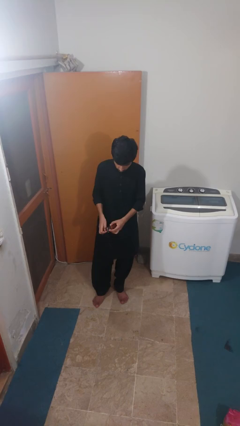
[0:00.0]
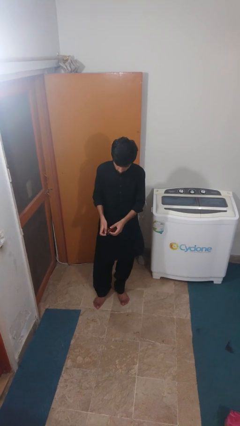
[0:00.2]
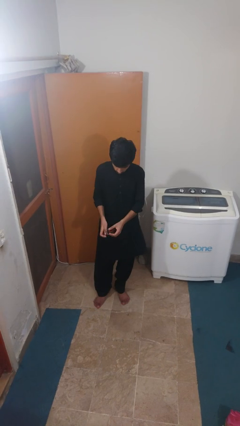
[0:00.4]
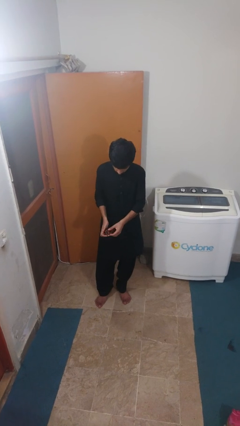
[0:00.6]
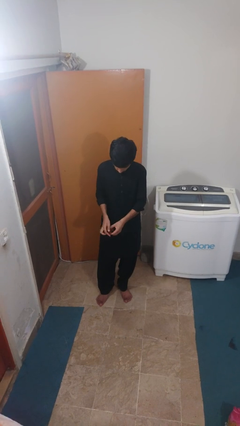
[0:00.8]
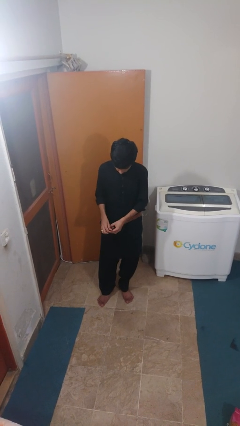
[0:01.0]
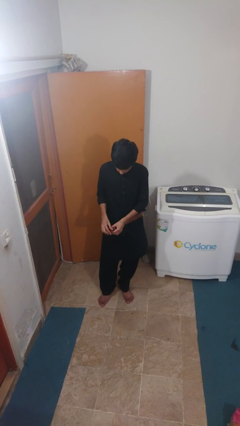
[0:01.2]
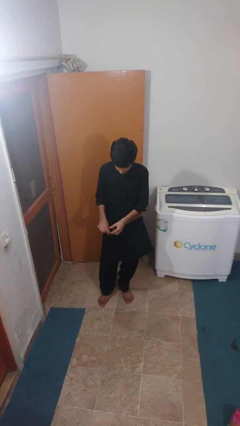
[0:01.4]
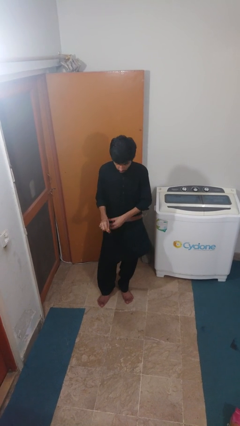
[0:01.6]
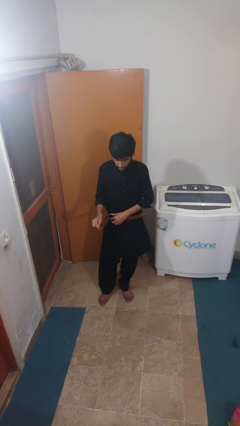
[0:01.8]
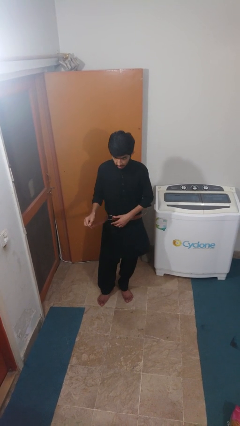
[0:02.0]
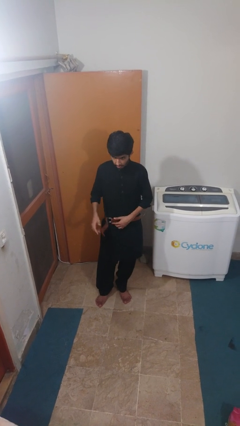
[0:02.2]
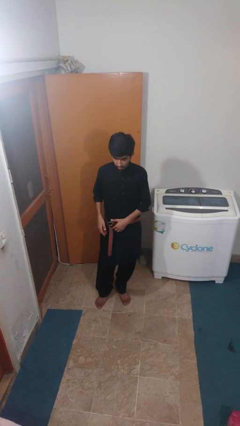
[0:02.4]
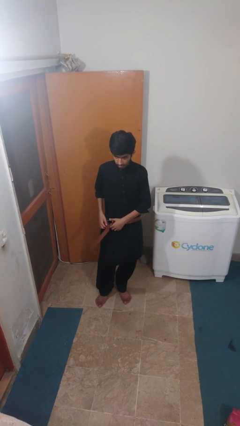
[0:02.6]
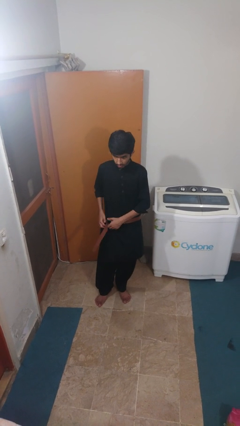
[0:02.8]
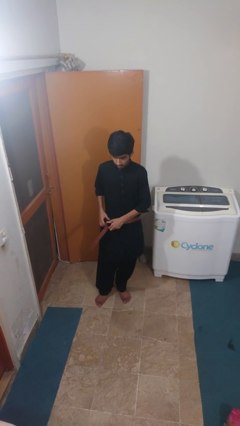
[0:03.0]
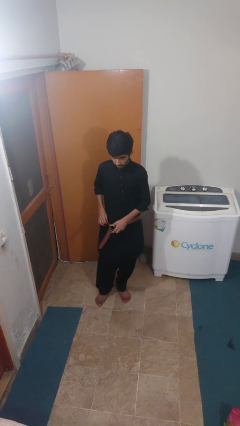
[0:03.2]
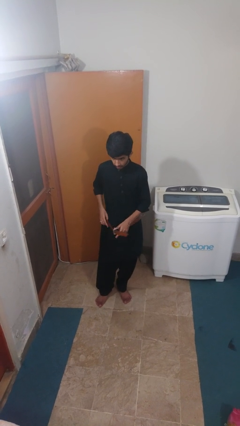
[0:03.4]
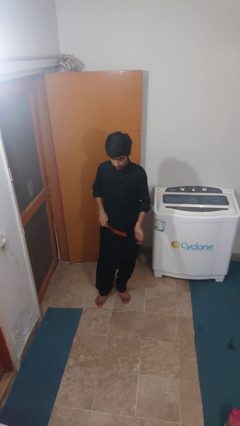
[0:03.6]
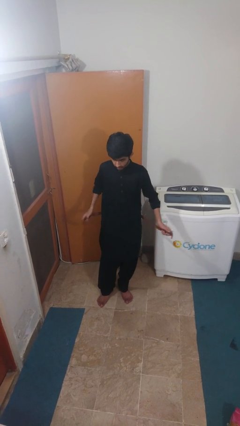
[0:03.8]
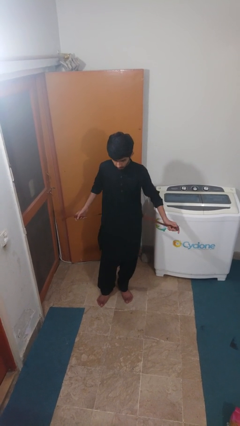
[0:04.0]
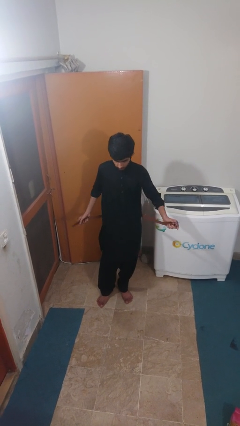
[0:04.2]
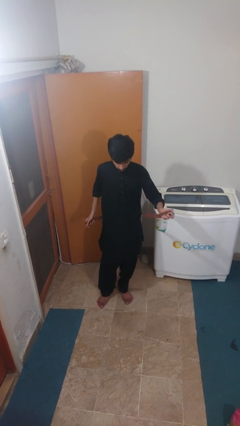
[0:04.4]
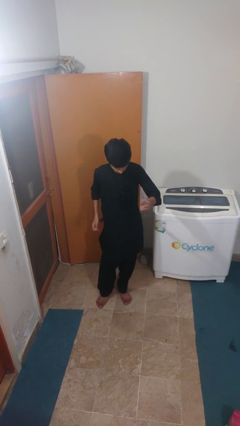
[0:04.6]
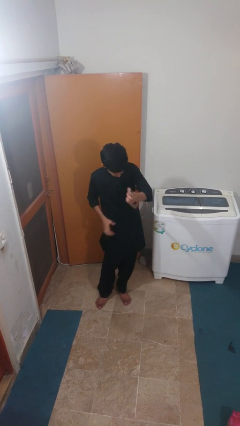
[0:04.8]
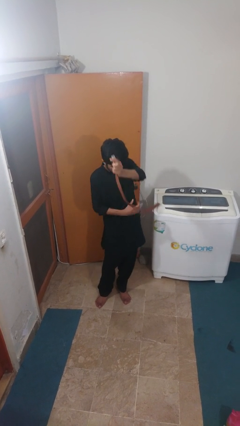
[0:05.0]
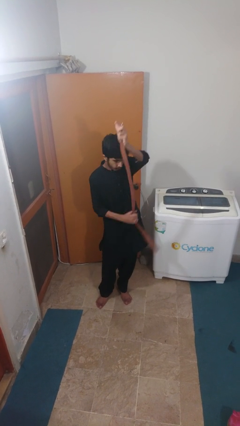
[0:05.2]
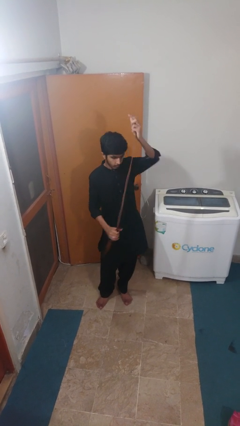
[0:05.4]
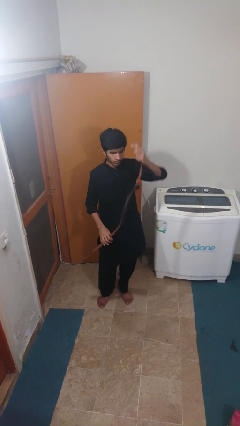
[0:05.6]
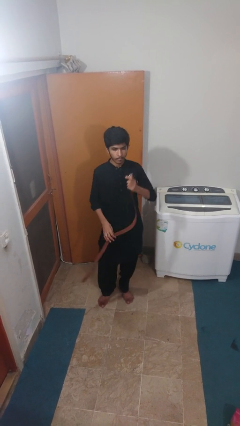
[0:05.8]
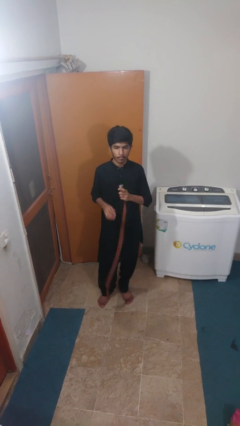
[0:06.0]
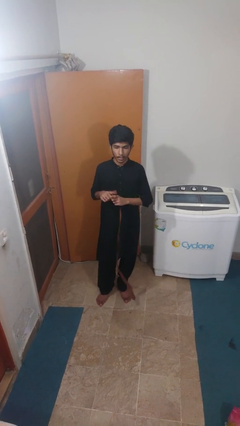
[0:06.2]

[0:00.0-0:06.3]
person takes off belt

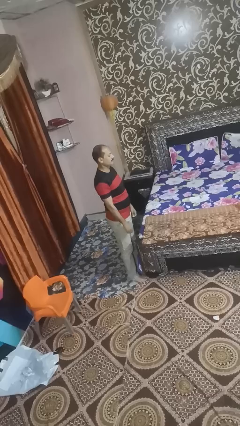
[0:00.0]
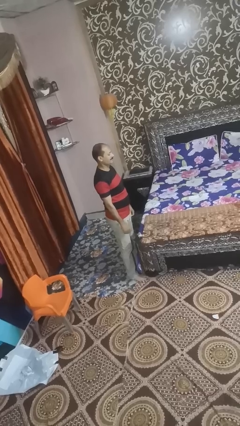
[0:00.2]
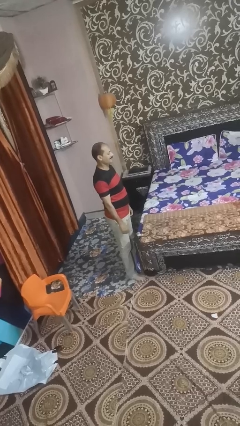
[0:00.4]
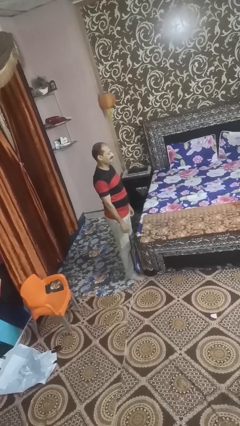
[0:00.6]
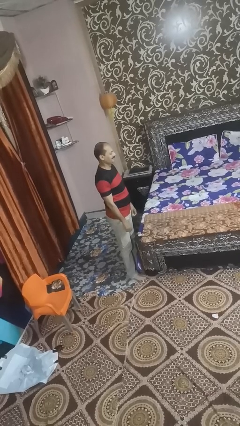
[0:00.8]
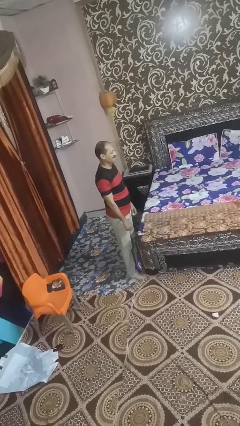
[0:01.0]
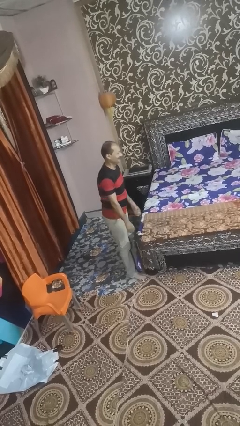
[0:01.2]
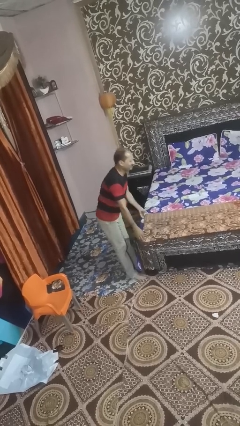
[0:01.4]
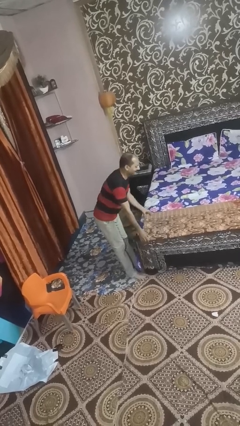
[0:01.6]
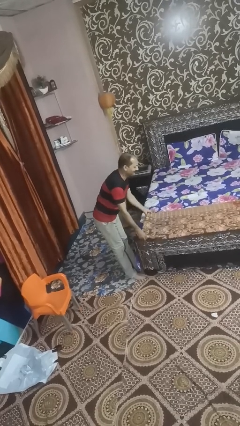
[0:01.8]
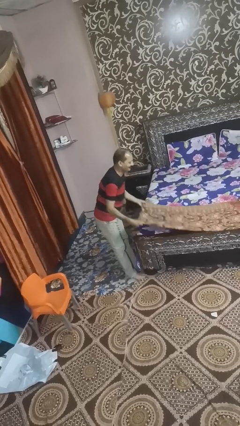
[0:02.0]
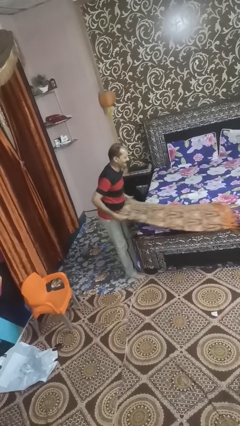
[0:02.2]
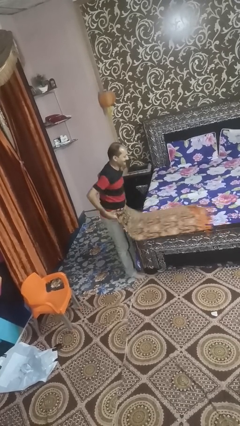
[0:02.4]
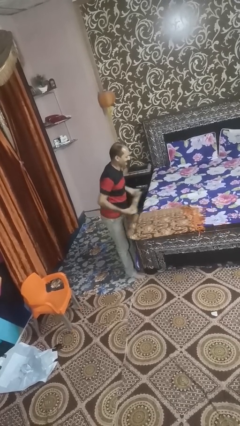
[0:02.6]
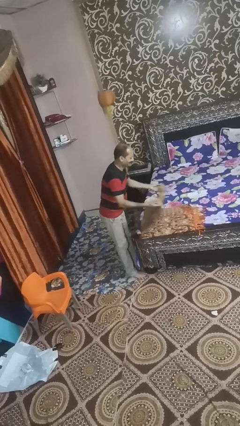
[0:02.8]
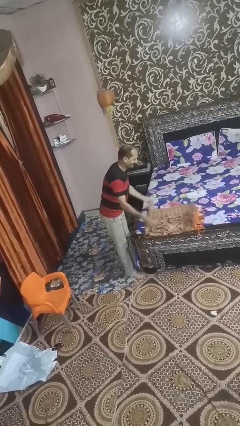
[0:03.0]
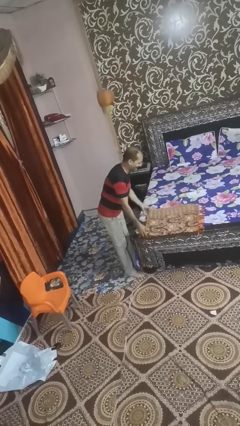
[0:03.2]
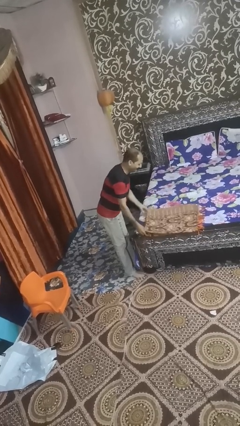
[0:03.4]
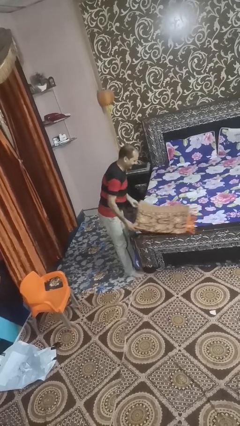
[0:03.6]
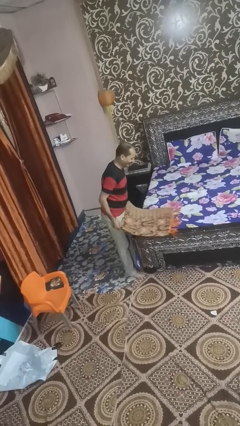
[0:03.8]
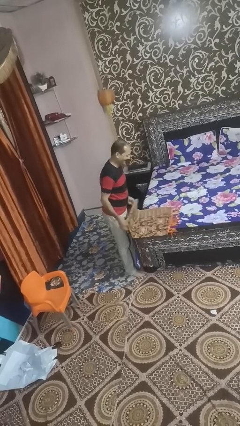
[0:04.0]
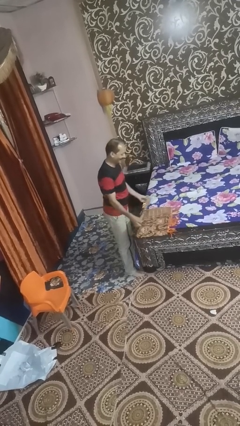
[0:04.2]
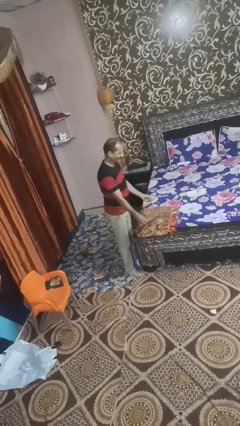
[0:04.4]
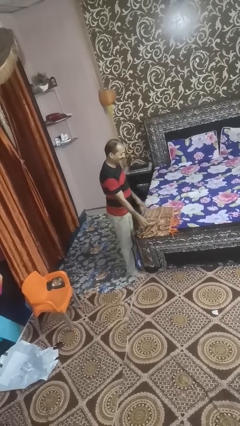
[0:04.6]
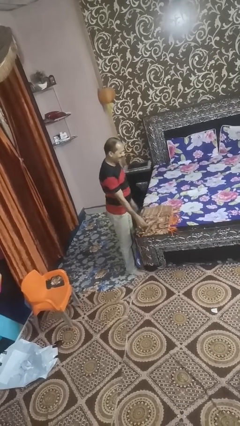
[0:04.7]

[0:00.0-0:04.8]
person folds blanket

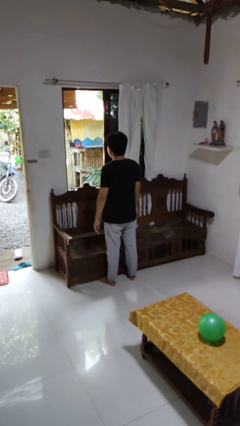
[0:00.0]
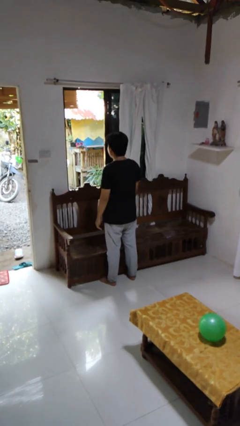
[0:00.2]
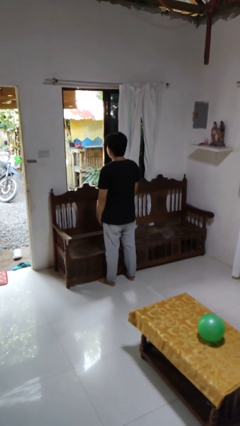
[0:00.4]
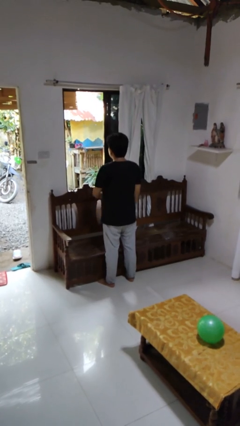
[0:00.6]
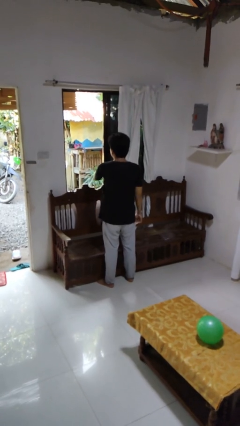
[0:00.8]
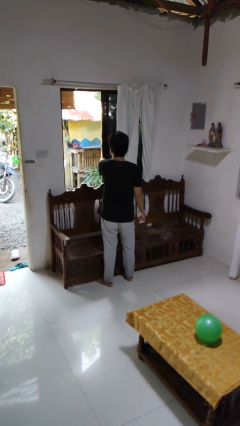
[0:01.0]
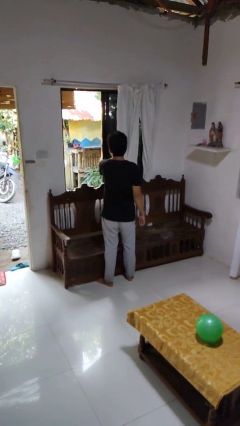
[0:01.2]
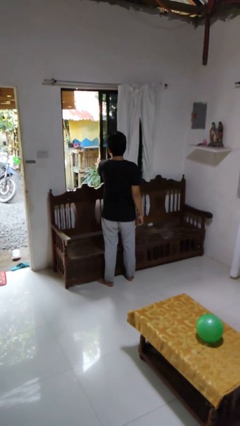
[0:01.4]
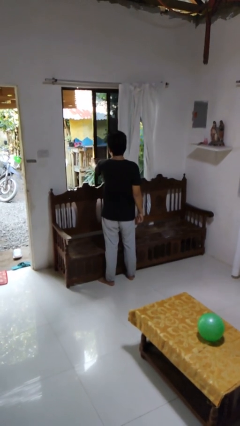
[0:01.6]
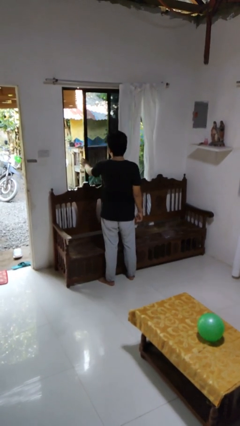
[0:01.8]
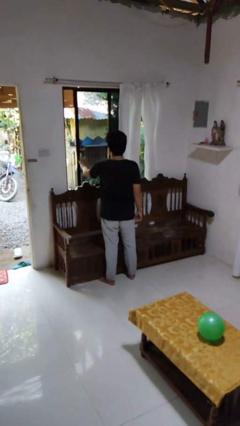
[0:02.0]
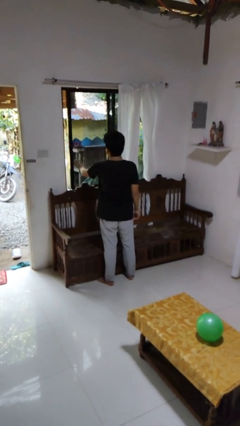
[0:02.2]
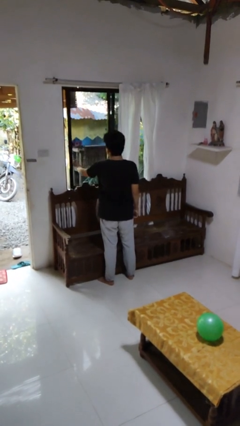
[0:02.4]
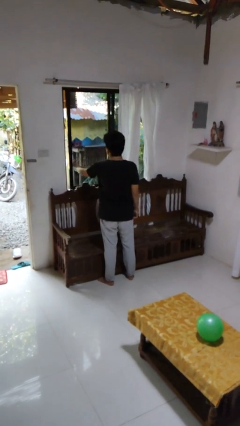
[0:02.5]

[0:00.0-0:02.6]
person closes home window

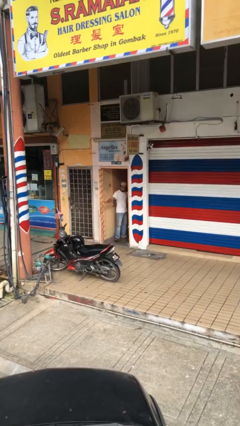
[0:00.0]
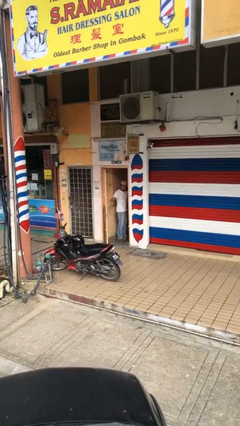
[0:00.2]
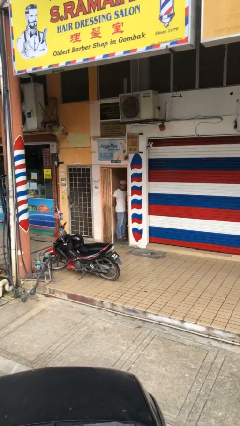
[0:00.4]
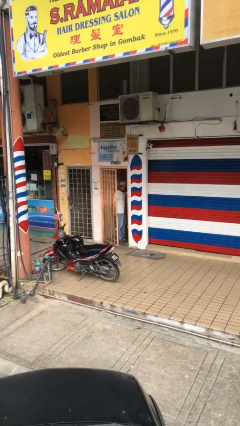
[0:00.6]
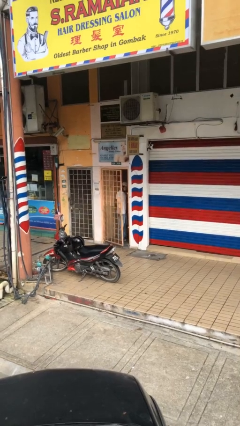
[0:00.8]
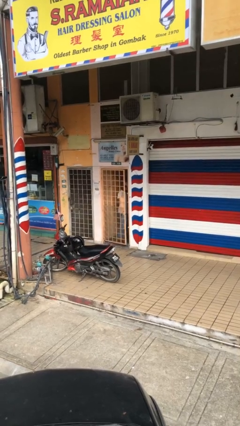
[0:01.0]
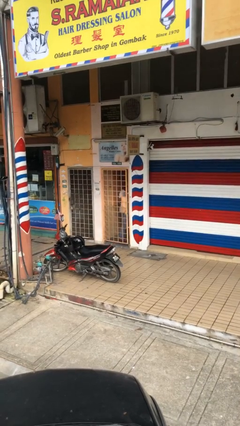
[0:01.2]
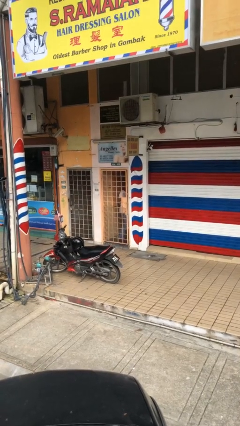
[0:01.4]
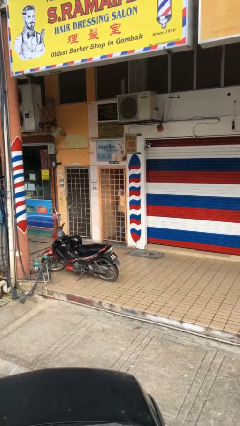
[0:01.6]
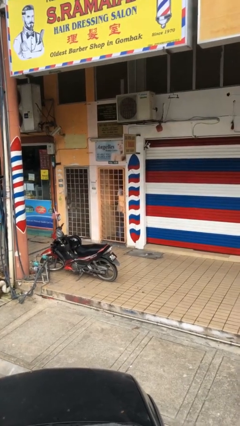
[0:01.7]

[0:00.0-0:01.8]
person closes facility door

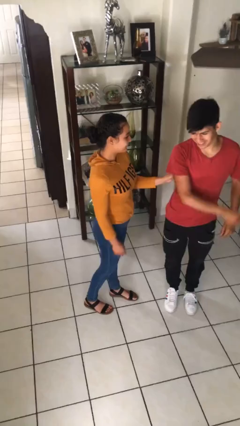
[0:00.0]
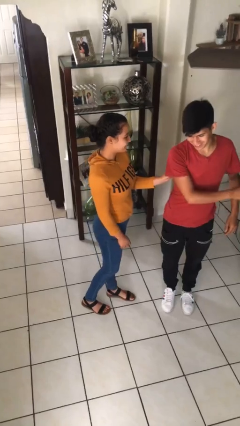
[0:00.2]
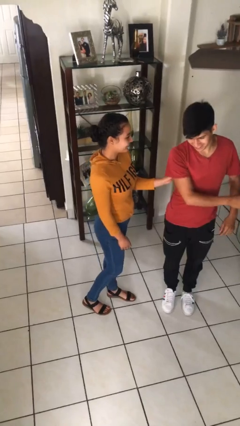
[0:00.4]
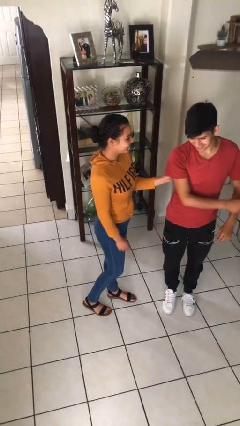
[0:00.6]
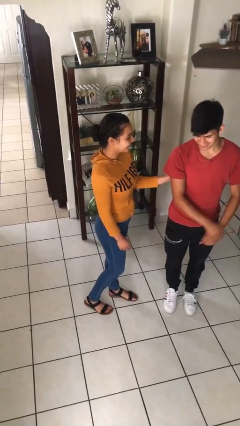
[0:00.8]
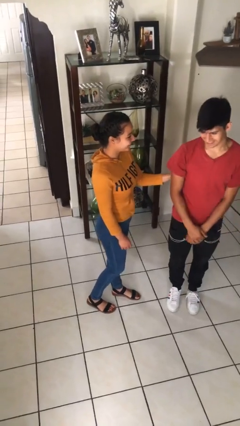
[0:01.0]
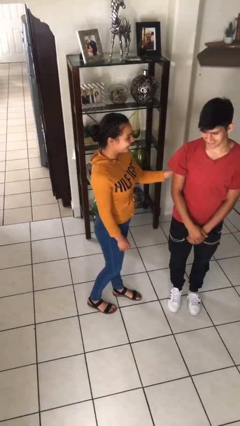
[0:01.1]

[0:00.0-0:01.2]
person tickles person

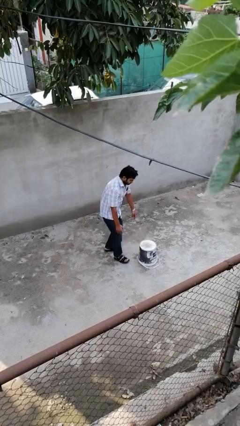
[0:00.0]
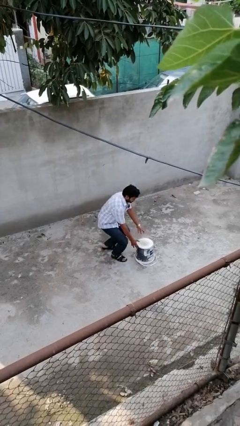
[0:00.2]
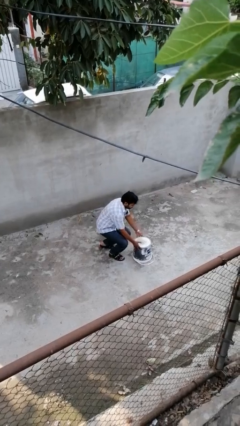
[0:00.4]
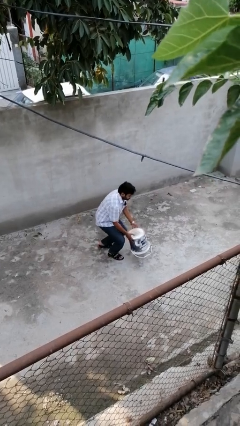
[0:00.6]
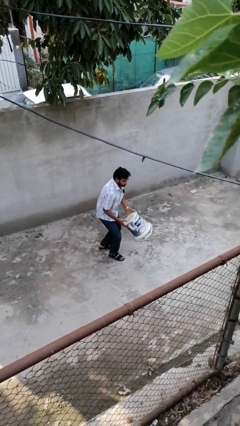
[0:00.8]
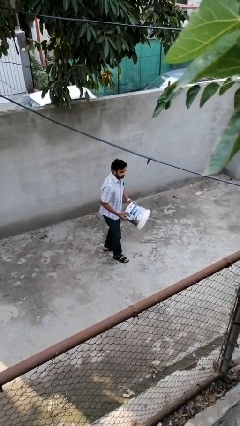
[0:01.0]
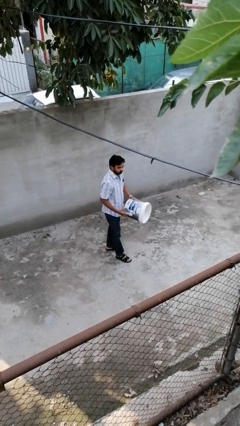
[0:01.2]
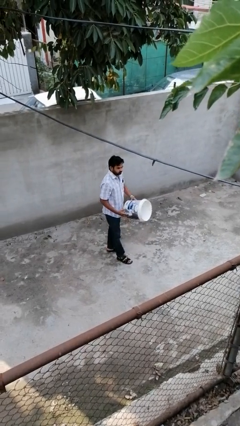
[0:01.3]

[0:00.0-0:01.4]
person picks up object from floor
